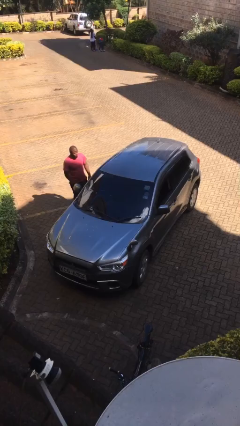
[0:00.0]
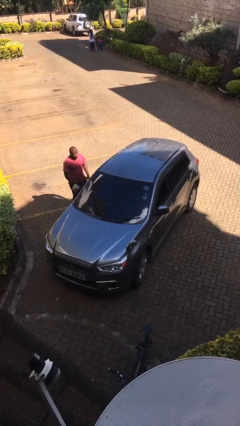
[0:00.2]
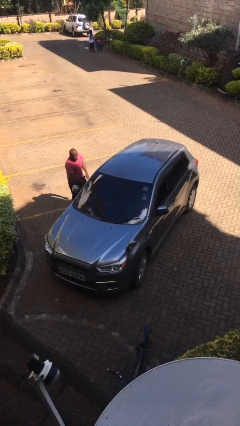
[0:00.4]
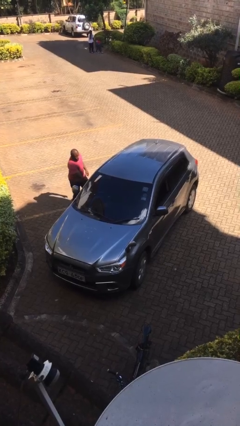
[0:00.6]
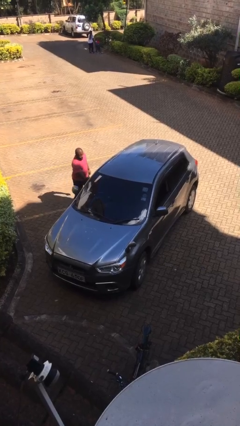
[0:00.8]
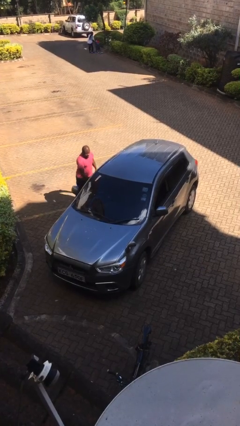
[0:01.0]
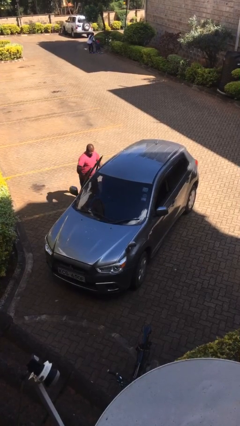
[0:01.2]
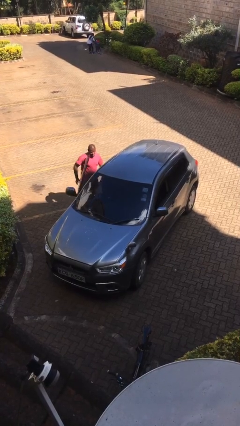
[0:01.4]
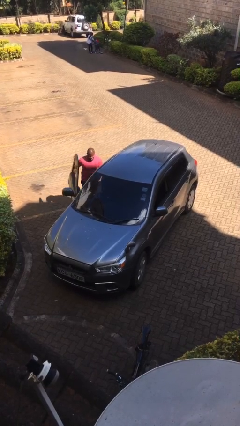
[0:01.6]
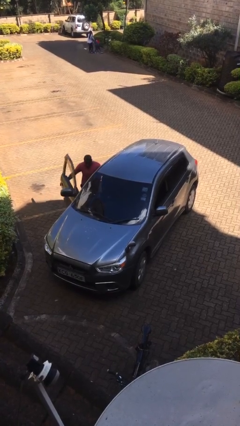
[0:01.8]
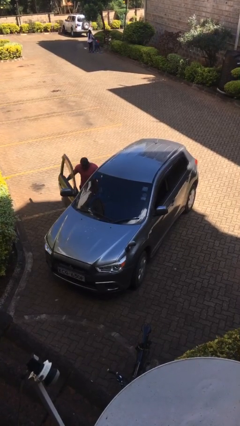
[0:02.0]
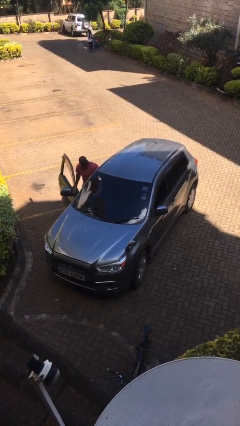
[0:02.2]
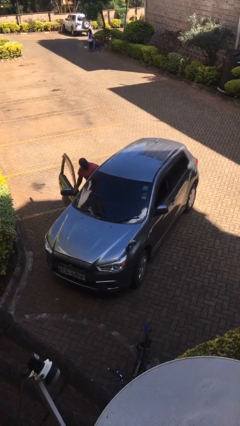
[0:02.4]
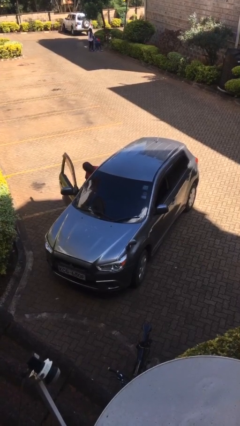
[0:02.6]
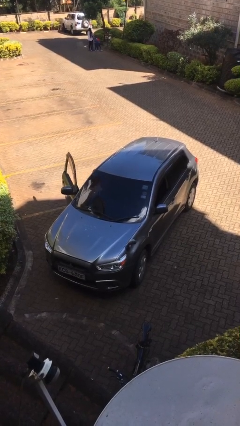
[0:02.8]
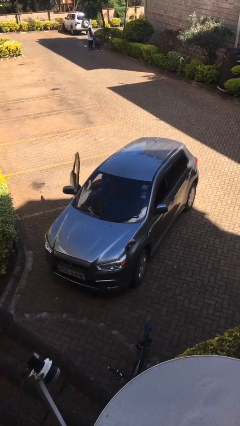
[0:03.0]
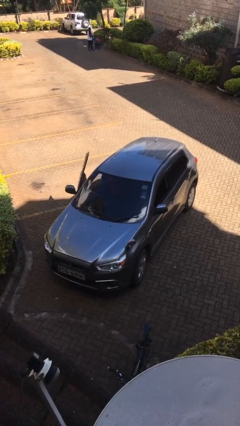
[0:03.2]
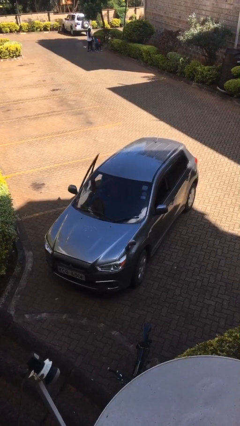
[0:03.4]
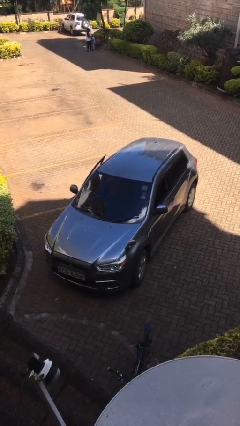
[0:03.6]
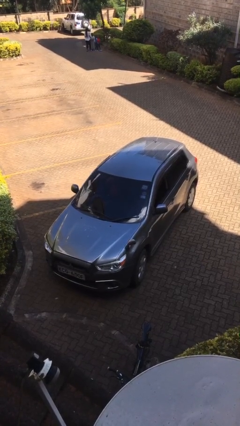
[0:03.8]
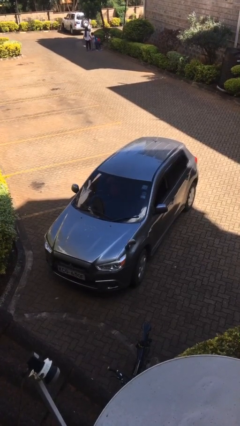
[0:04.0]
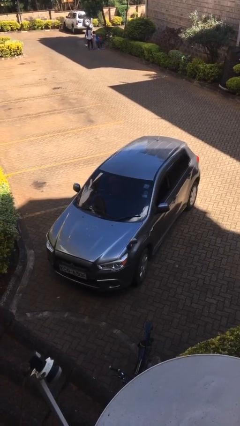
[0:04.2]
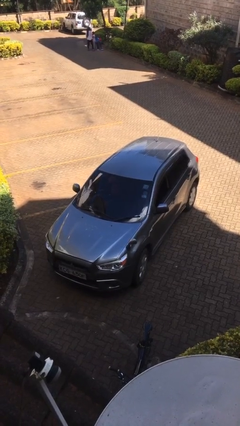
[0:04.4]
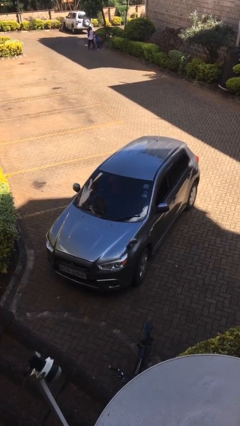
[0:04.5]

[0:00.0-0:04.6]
car picks up person

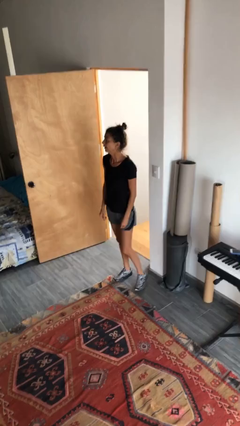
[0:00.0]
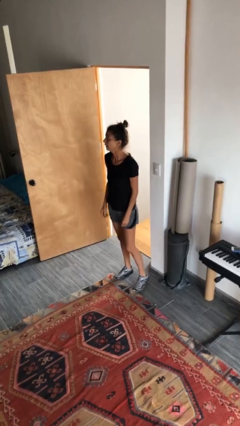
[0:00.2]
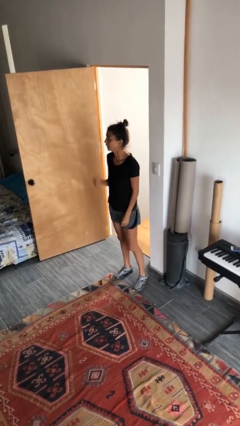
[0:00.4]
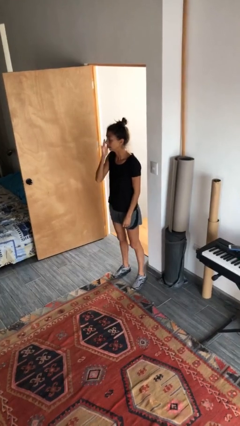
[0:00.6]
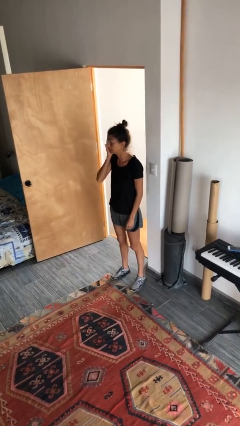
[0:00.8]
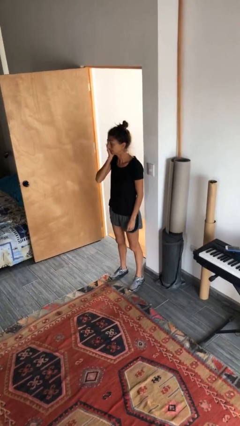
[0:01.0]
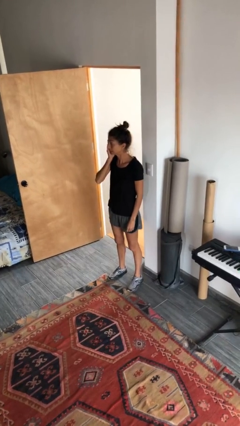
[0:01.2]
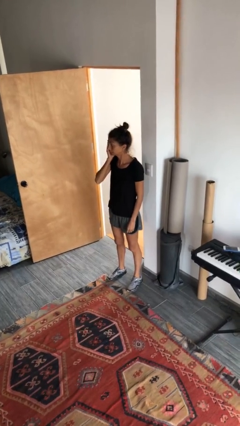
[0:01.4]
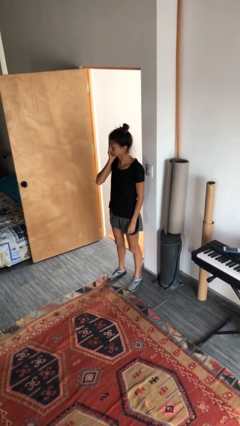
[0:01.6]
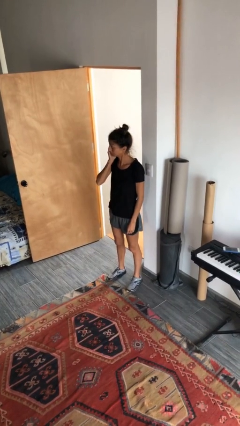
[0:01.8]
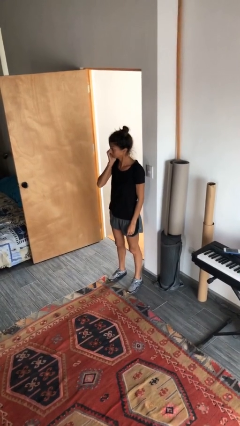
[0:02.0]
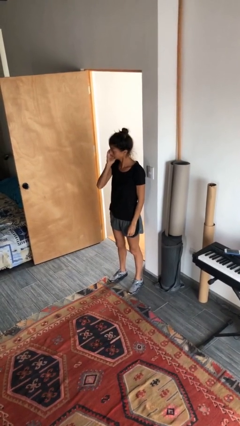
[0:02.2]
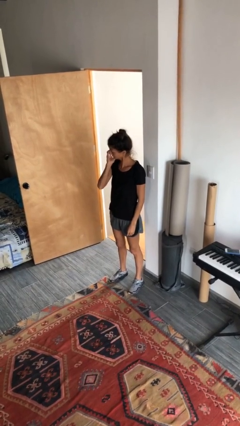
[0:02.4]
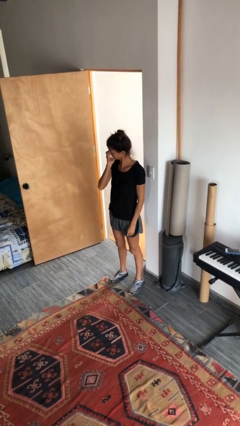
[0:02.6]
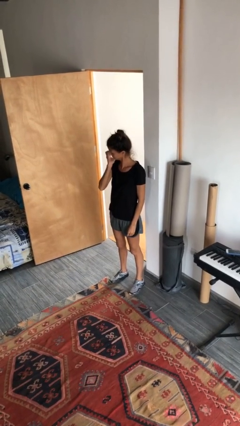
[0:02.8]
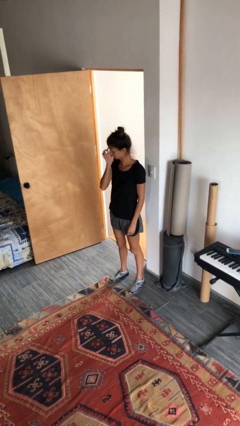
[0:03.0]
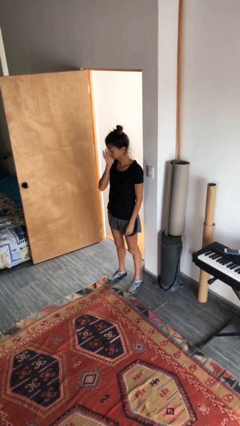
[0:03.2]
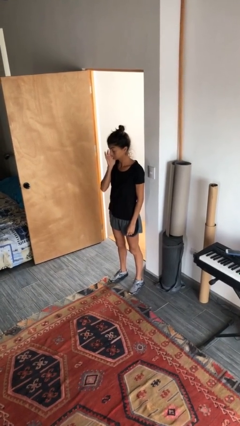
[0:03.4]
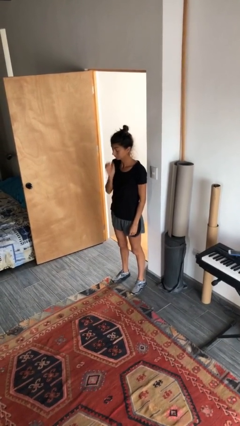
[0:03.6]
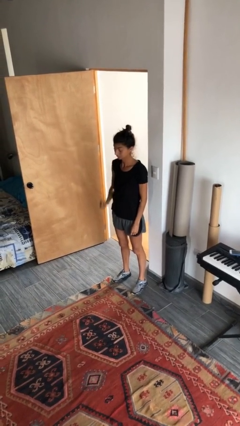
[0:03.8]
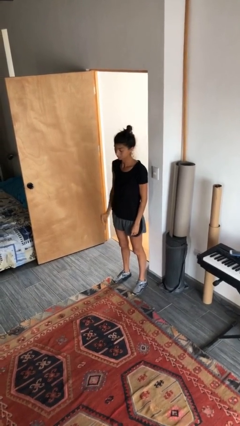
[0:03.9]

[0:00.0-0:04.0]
person scratches face

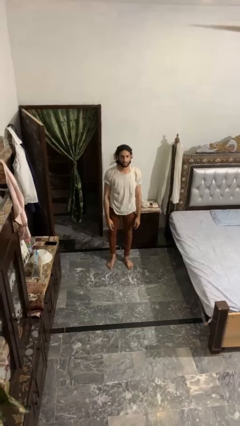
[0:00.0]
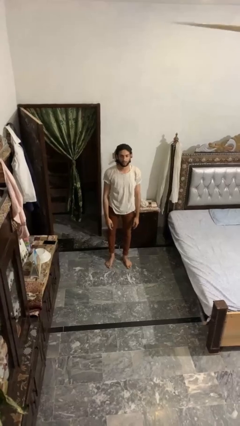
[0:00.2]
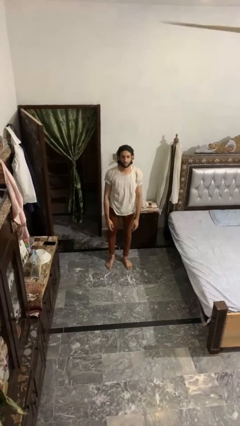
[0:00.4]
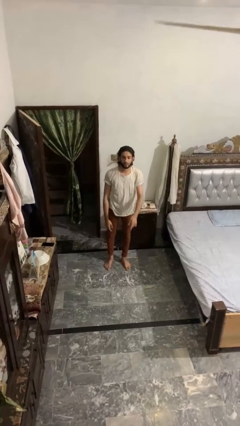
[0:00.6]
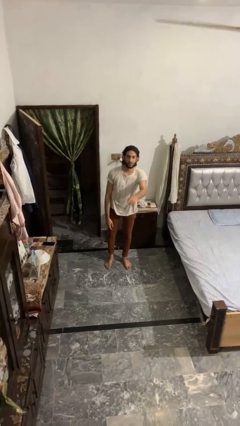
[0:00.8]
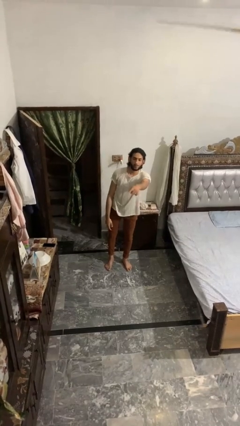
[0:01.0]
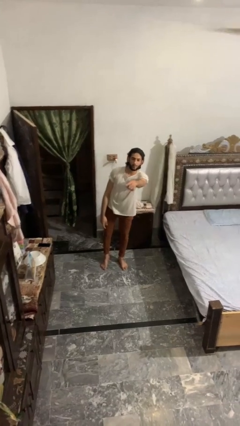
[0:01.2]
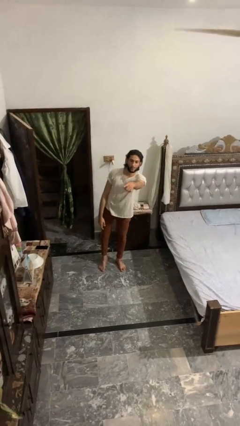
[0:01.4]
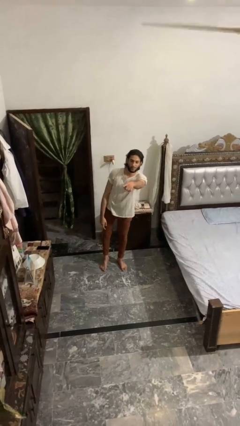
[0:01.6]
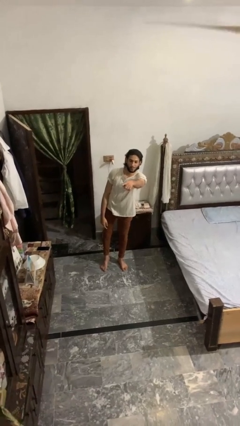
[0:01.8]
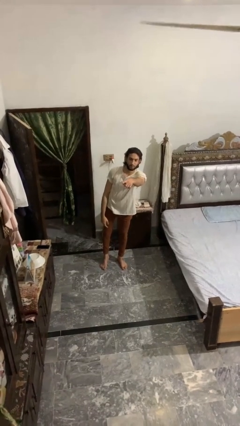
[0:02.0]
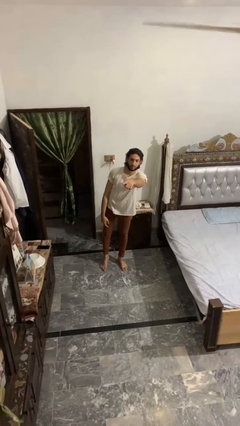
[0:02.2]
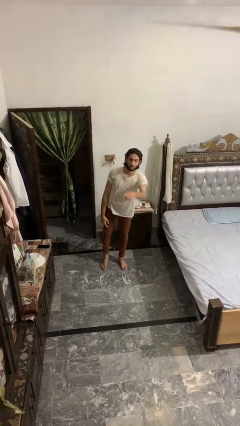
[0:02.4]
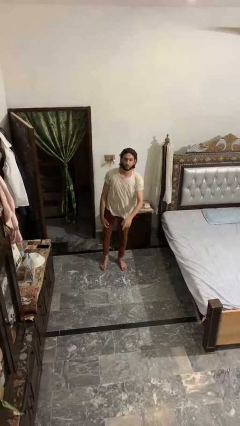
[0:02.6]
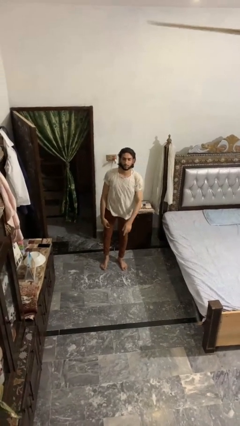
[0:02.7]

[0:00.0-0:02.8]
person points at person

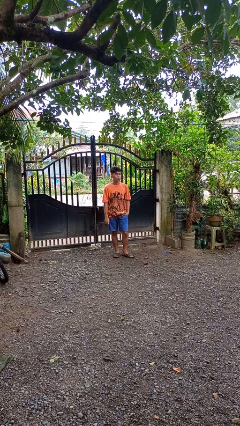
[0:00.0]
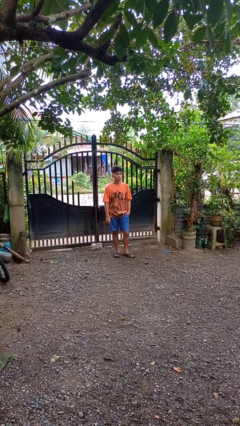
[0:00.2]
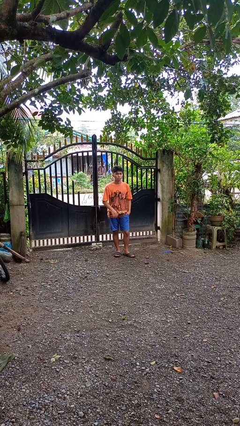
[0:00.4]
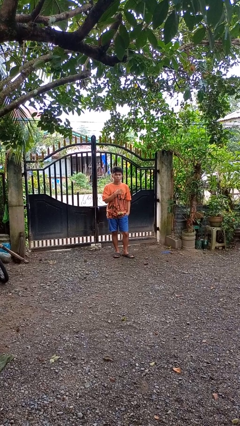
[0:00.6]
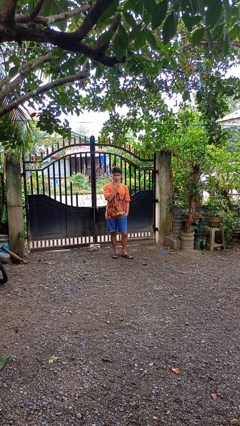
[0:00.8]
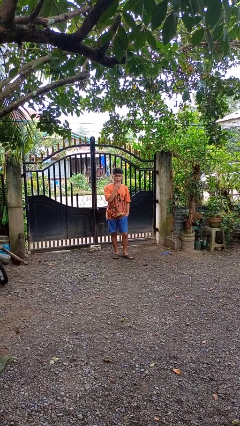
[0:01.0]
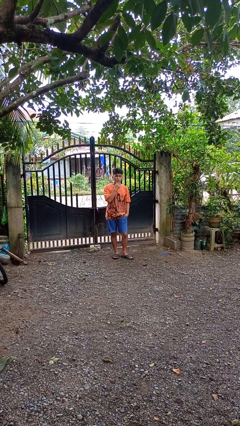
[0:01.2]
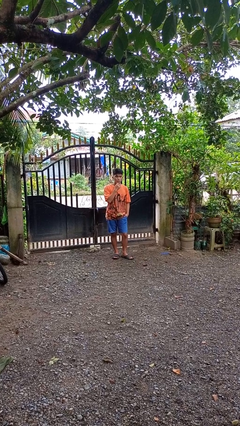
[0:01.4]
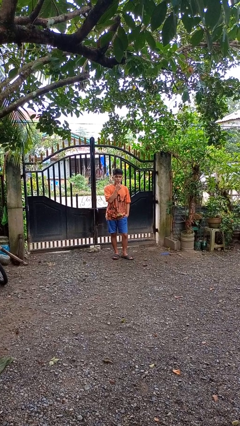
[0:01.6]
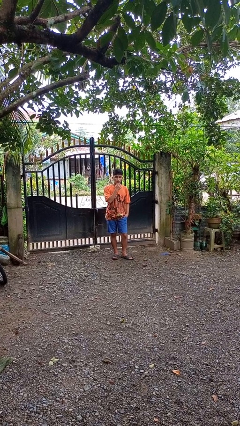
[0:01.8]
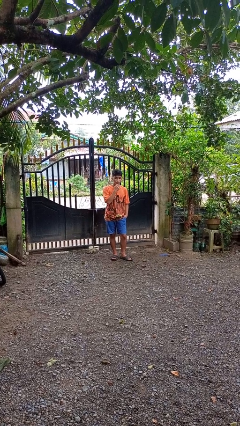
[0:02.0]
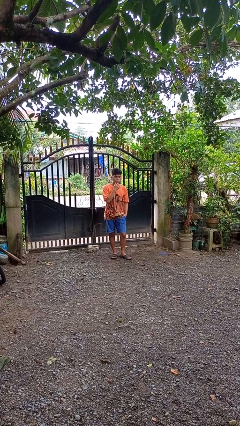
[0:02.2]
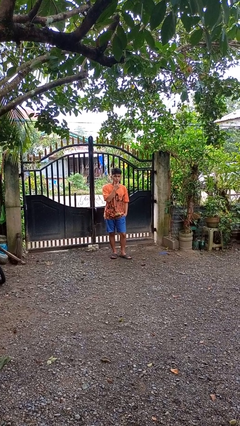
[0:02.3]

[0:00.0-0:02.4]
person strokes chin

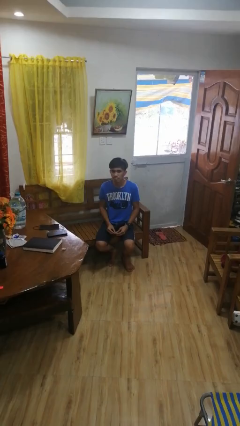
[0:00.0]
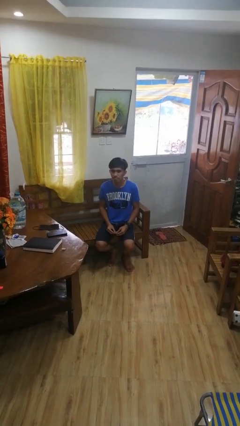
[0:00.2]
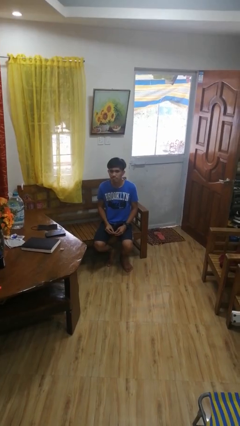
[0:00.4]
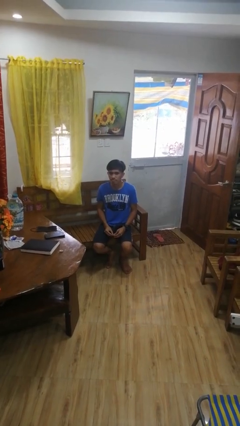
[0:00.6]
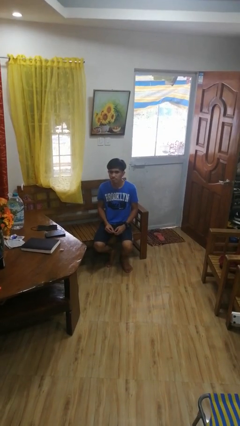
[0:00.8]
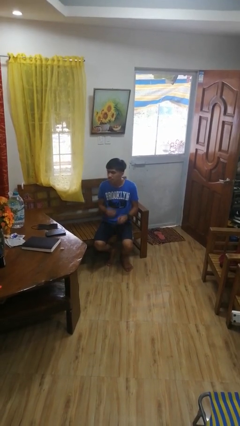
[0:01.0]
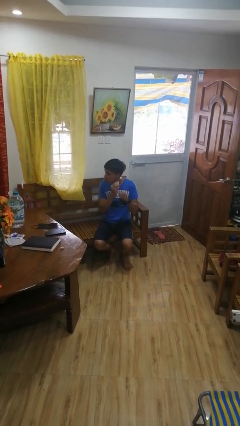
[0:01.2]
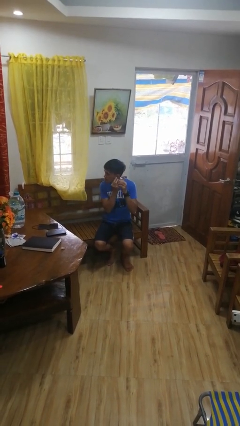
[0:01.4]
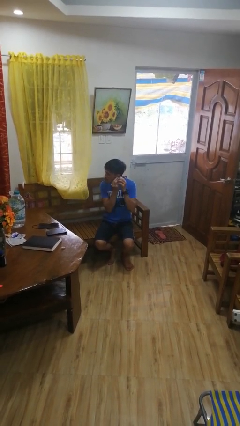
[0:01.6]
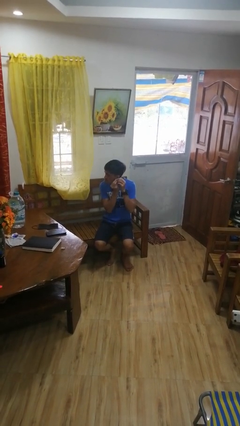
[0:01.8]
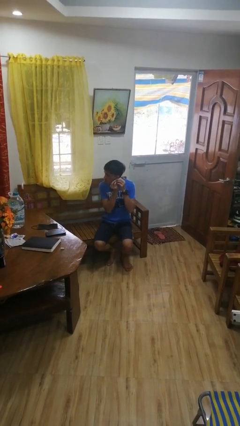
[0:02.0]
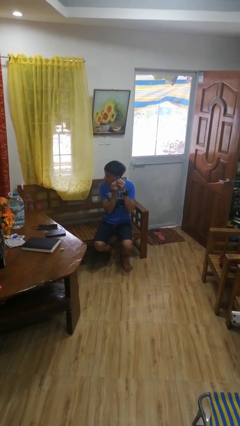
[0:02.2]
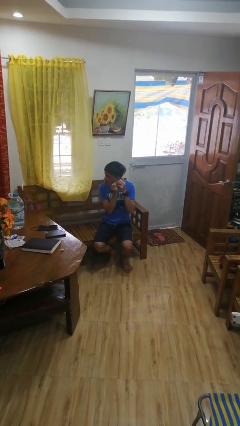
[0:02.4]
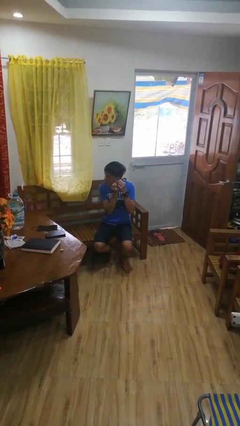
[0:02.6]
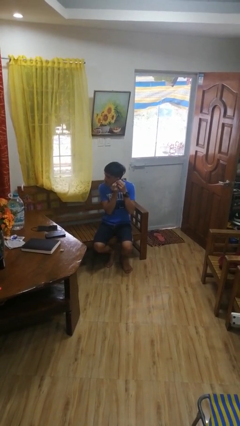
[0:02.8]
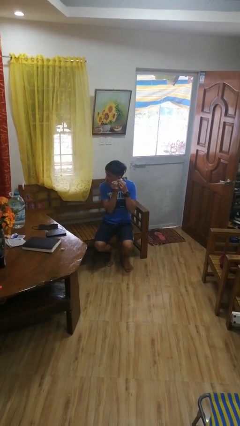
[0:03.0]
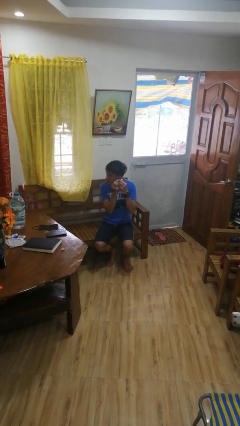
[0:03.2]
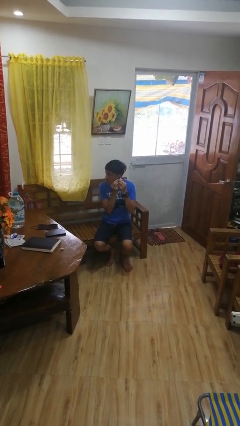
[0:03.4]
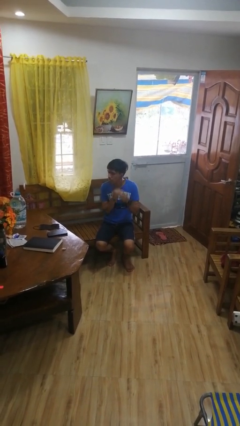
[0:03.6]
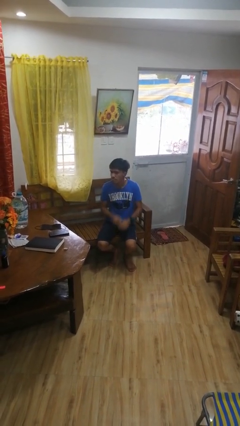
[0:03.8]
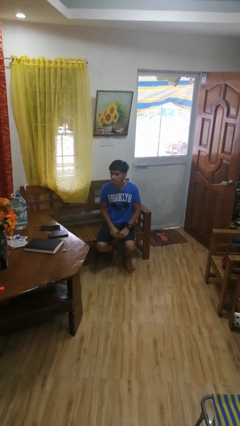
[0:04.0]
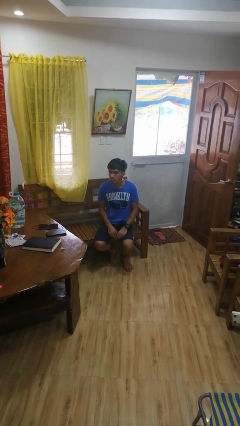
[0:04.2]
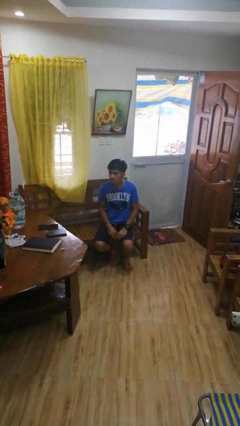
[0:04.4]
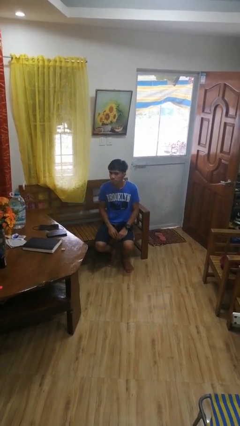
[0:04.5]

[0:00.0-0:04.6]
person puts on earrings
